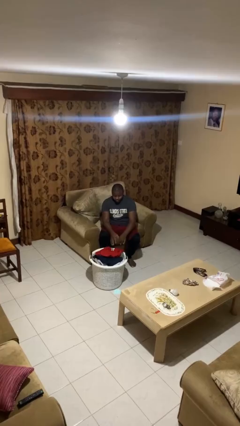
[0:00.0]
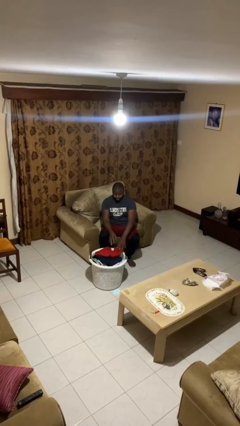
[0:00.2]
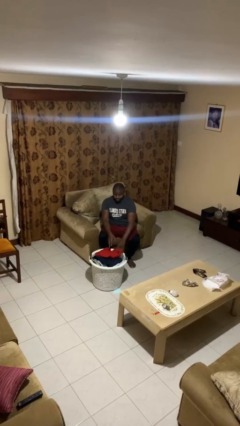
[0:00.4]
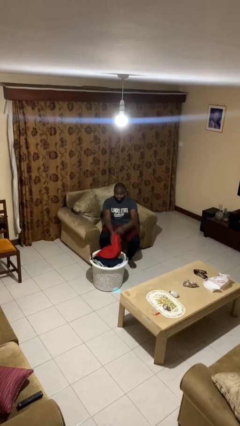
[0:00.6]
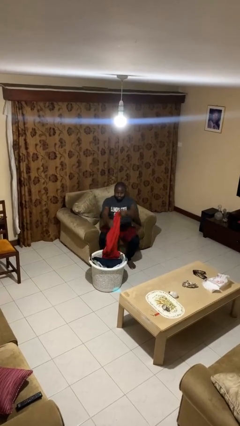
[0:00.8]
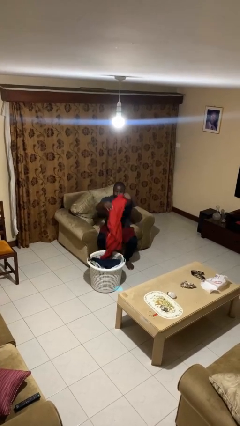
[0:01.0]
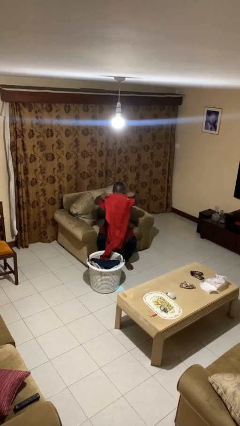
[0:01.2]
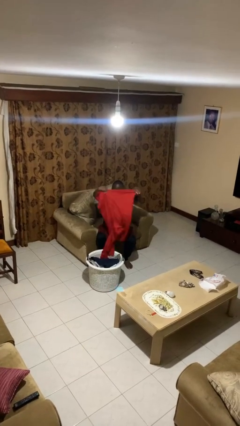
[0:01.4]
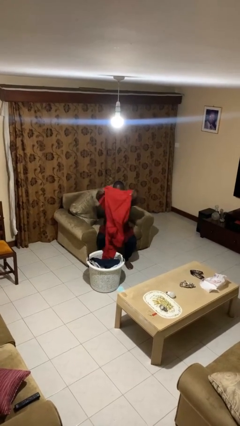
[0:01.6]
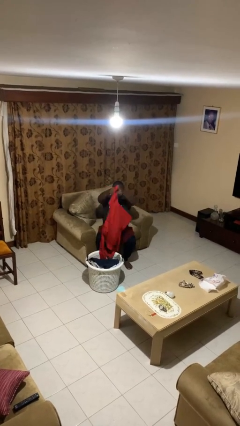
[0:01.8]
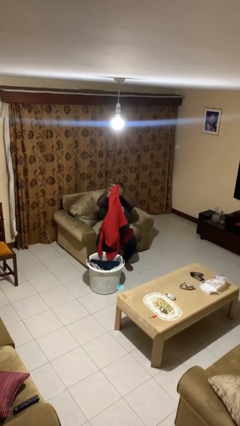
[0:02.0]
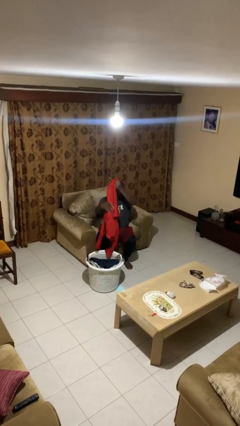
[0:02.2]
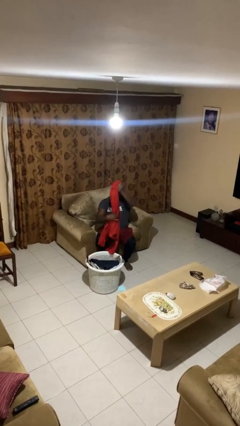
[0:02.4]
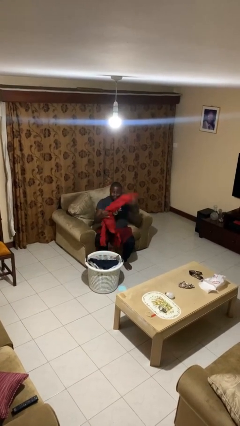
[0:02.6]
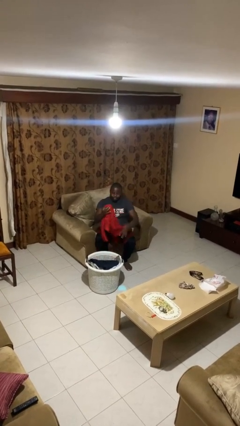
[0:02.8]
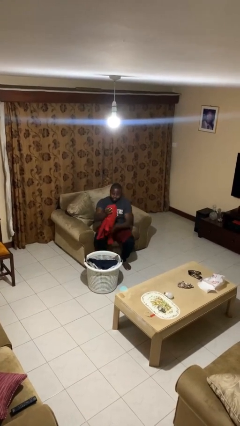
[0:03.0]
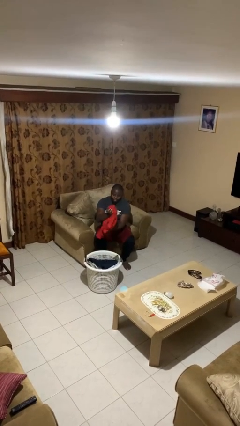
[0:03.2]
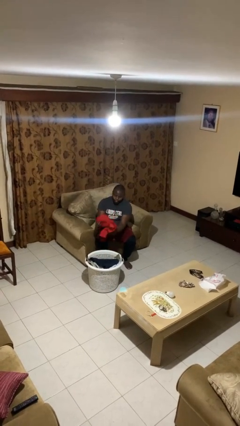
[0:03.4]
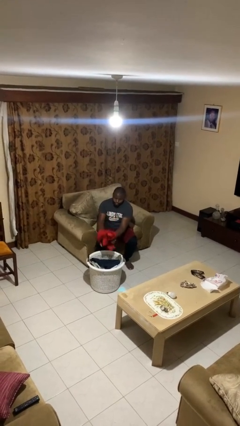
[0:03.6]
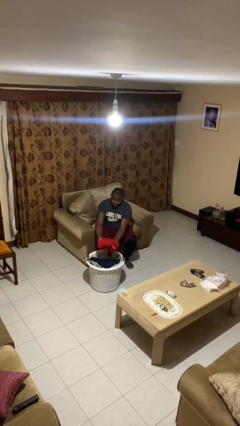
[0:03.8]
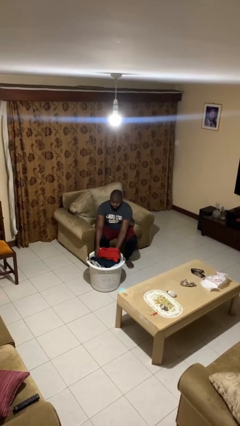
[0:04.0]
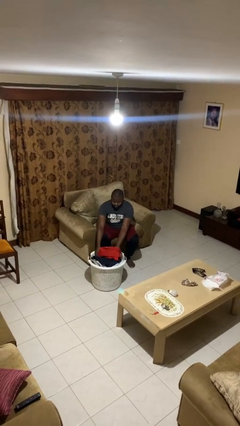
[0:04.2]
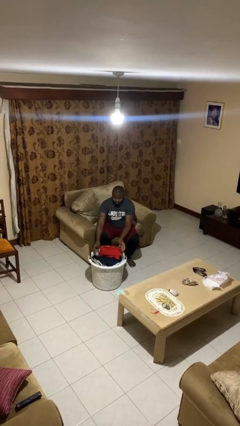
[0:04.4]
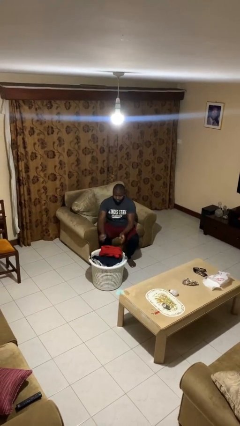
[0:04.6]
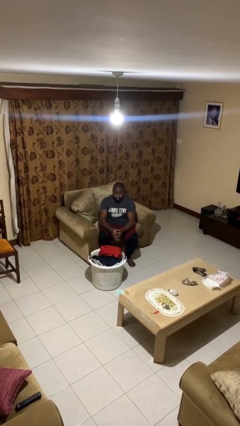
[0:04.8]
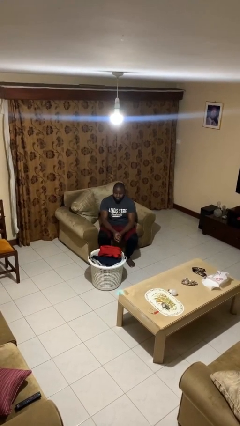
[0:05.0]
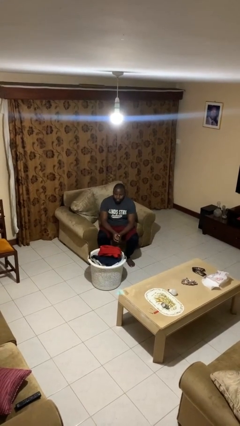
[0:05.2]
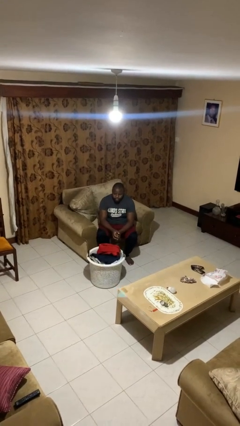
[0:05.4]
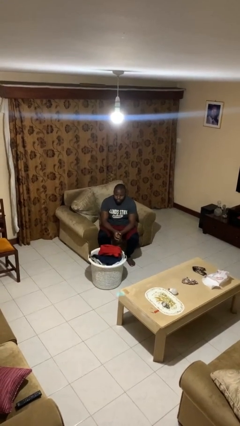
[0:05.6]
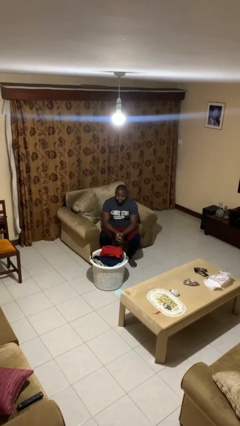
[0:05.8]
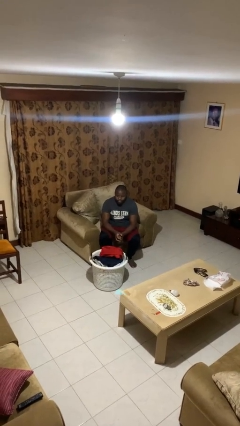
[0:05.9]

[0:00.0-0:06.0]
person folds shirt

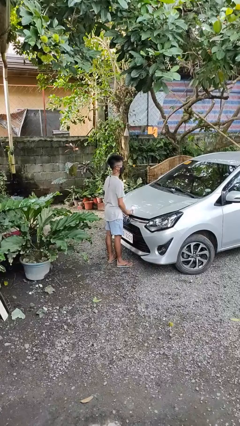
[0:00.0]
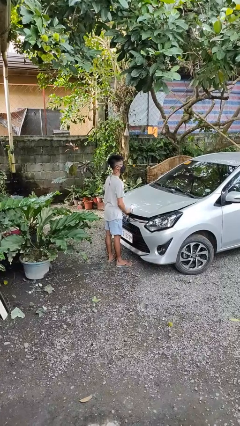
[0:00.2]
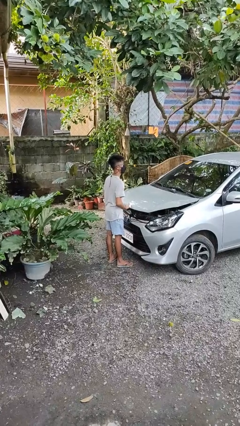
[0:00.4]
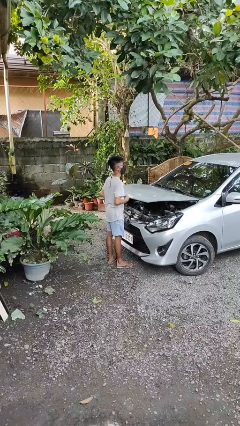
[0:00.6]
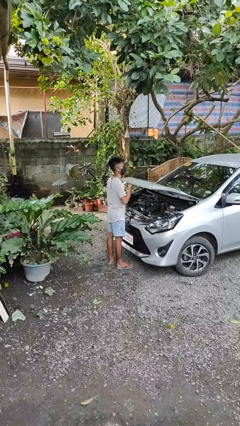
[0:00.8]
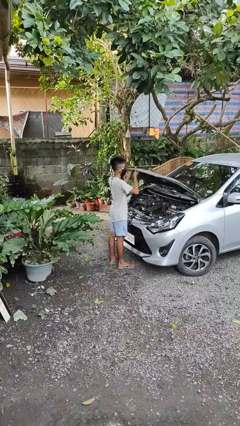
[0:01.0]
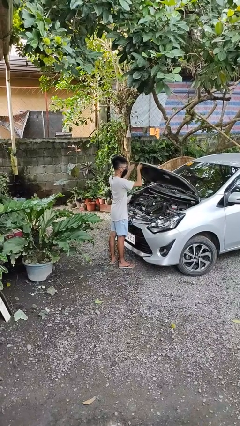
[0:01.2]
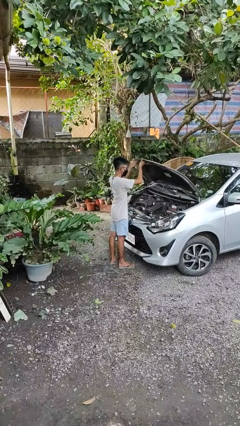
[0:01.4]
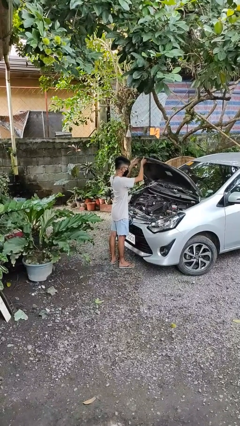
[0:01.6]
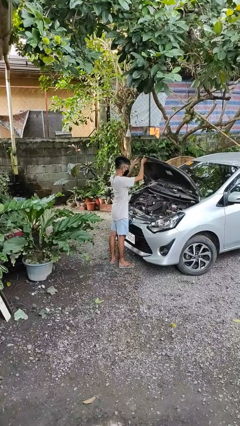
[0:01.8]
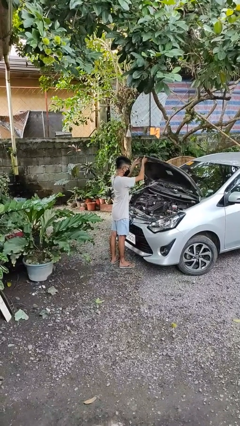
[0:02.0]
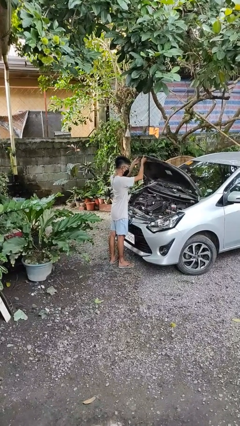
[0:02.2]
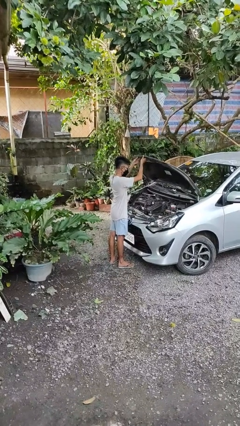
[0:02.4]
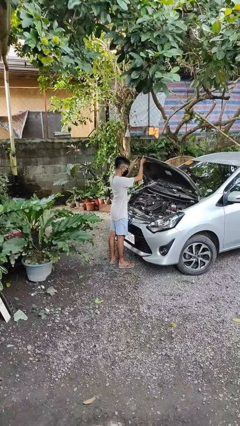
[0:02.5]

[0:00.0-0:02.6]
person opens car hood

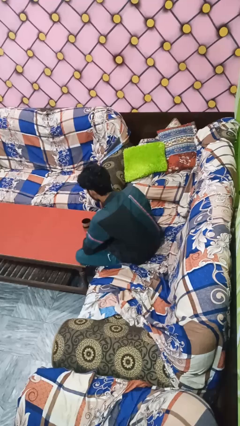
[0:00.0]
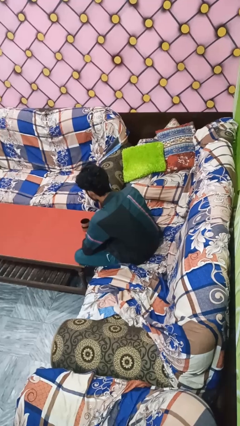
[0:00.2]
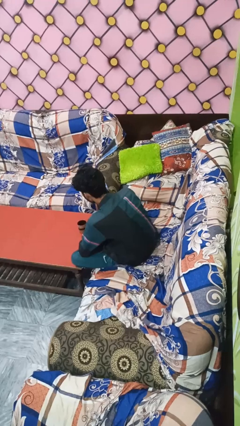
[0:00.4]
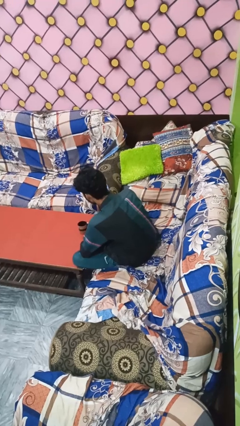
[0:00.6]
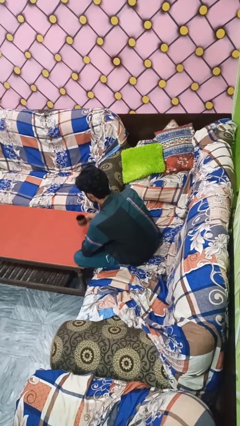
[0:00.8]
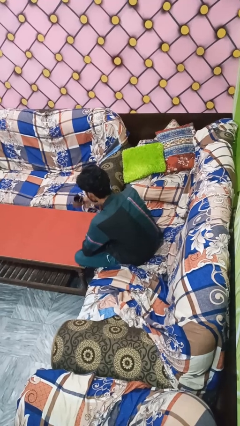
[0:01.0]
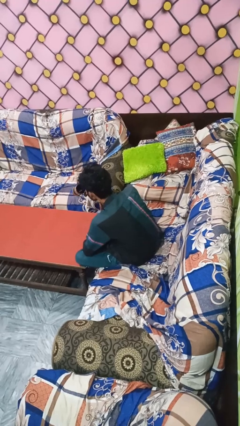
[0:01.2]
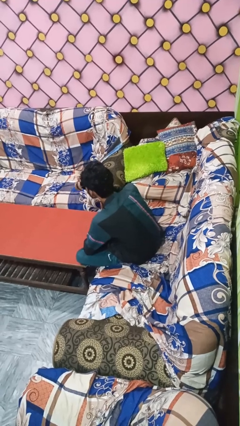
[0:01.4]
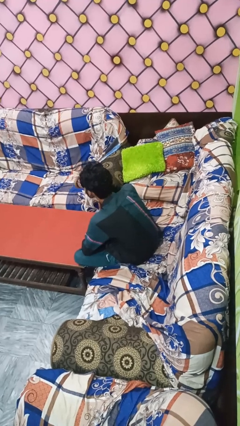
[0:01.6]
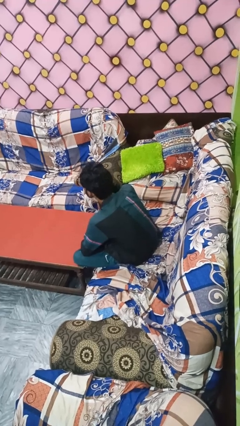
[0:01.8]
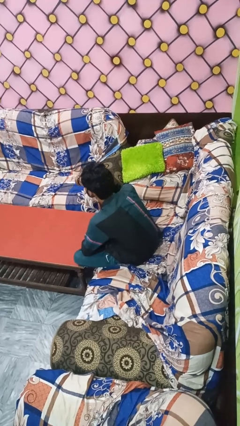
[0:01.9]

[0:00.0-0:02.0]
person pours coffee into mug

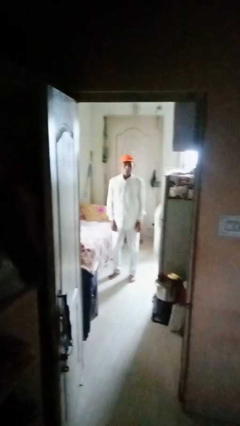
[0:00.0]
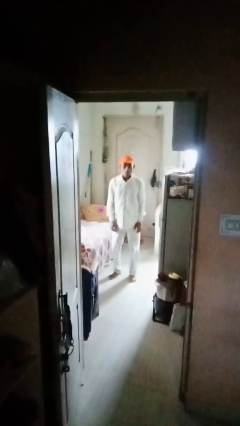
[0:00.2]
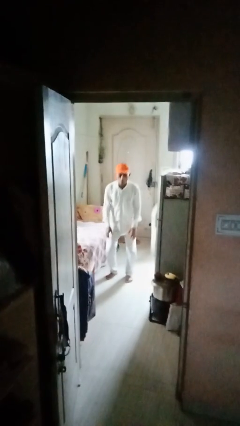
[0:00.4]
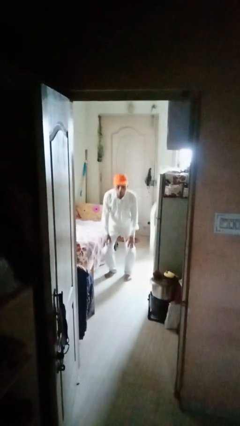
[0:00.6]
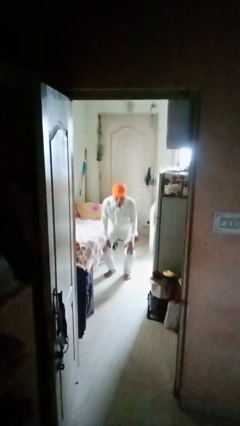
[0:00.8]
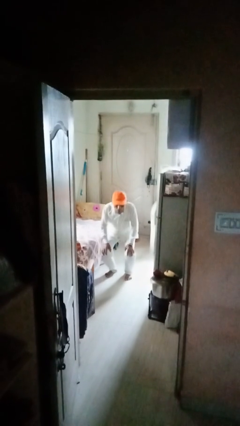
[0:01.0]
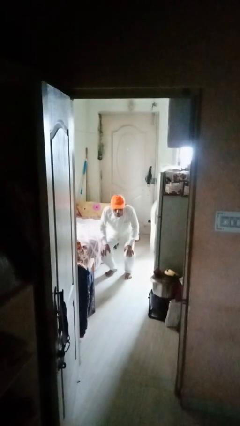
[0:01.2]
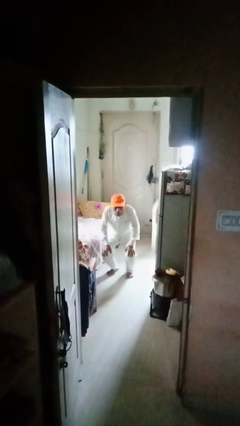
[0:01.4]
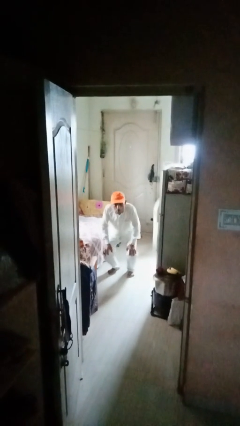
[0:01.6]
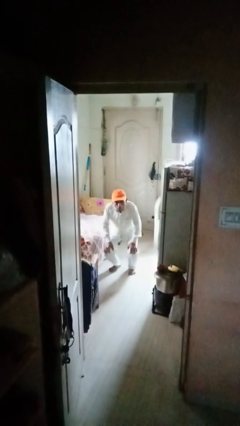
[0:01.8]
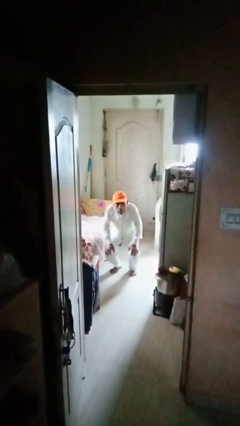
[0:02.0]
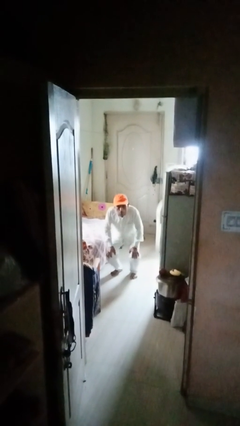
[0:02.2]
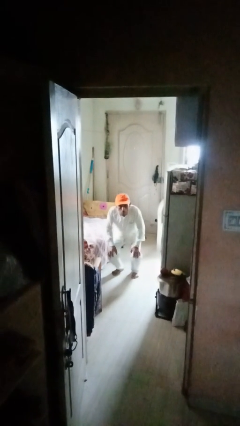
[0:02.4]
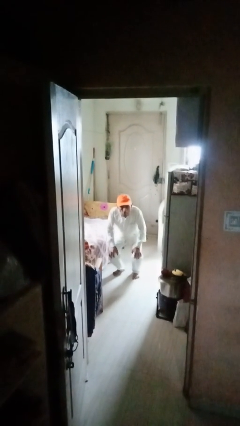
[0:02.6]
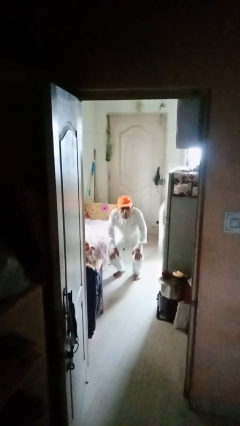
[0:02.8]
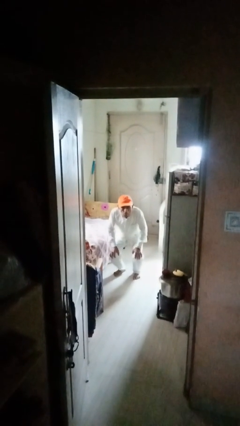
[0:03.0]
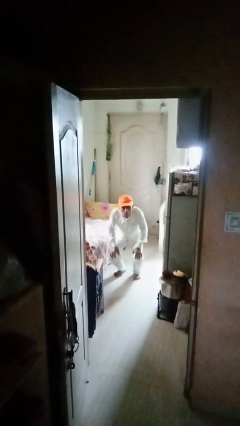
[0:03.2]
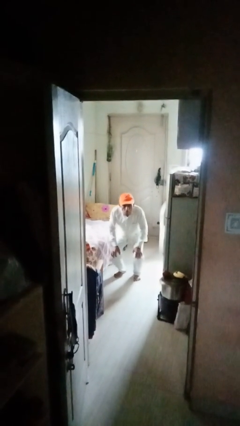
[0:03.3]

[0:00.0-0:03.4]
person squats

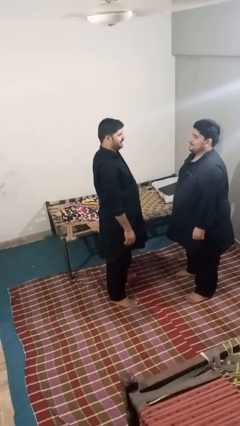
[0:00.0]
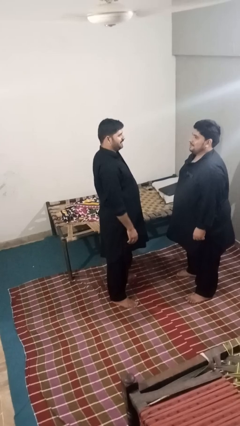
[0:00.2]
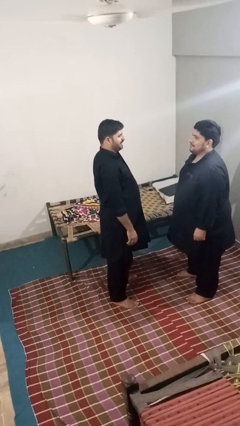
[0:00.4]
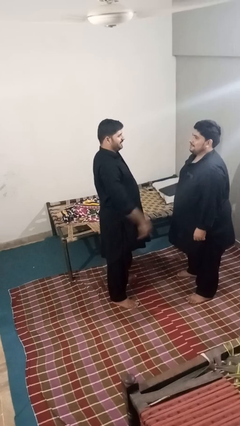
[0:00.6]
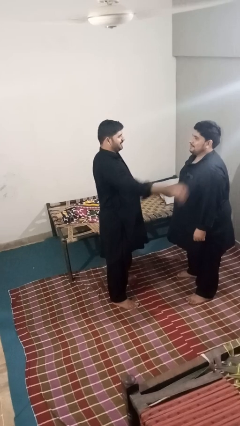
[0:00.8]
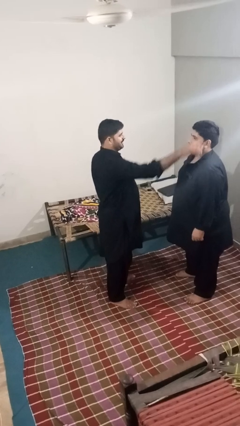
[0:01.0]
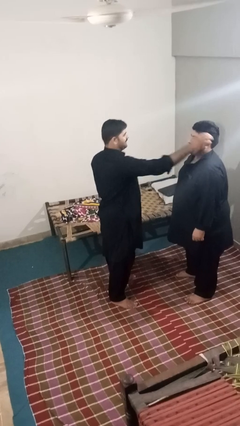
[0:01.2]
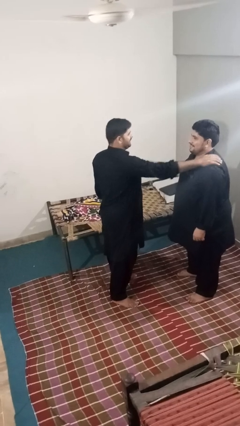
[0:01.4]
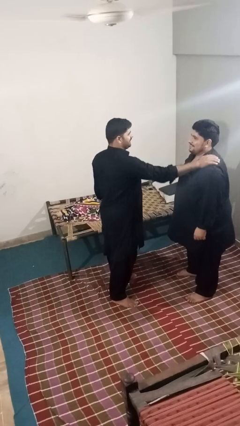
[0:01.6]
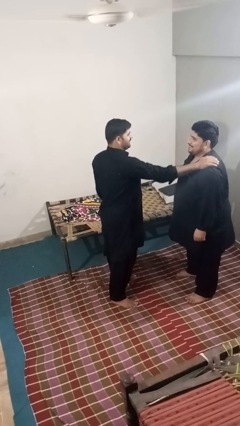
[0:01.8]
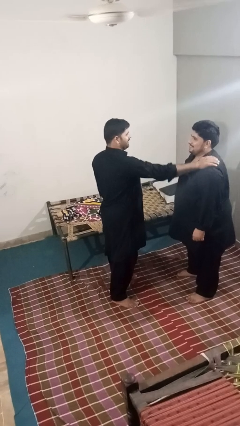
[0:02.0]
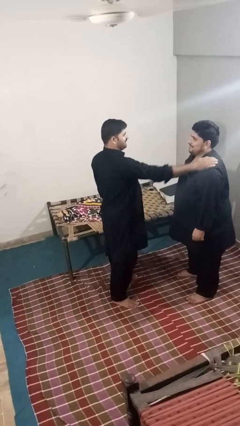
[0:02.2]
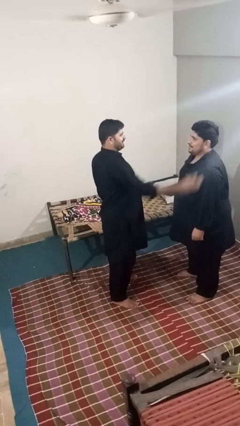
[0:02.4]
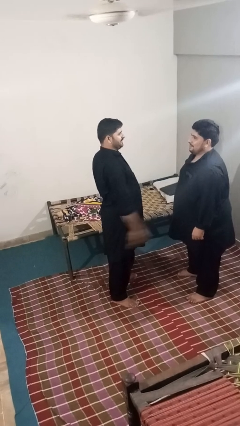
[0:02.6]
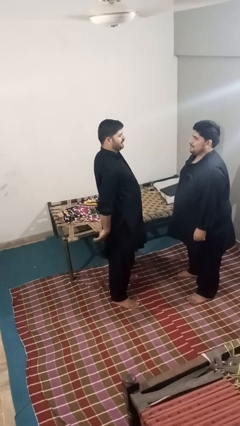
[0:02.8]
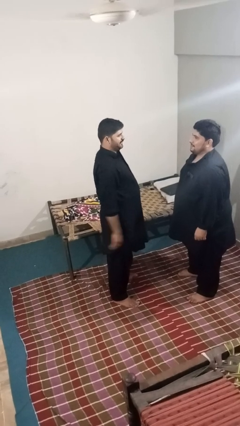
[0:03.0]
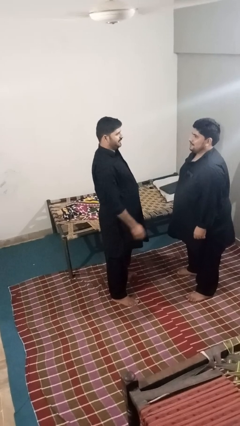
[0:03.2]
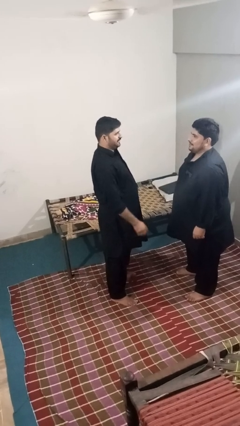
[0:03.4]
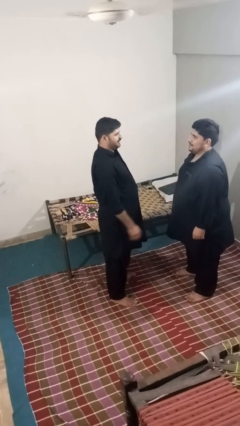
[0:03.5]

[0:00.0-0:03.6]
person pounds shoulders of person
